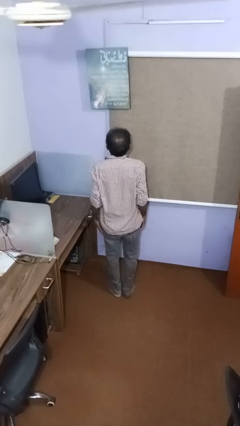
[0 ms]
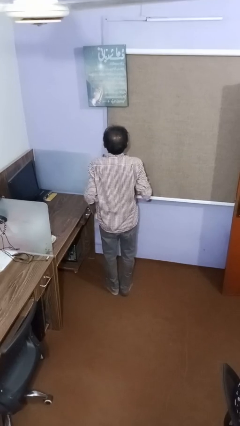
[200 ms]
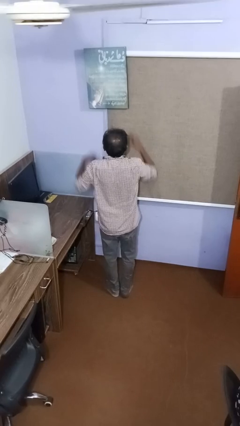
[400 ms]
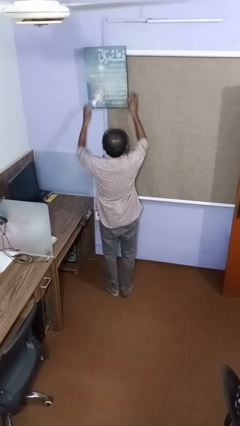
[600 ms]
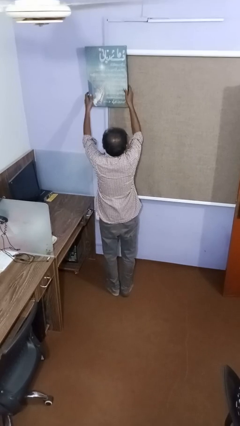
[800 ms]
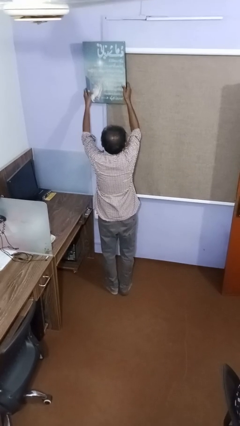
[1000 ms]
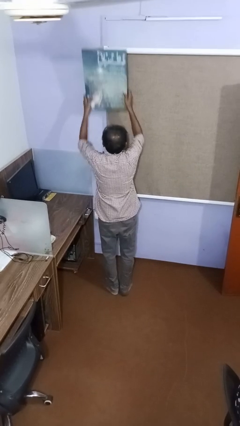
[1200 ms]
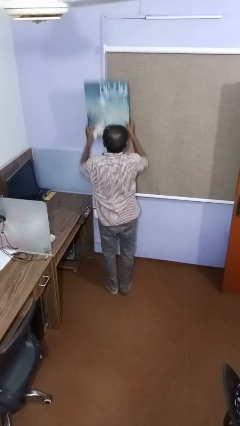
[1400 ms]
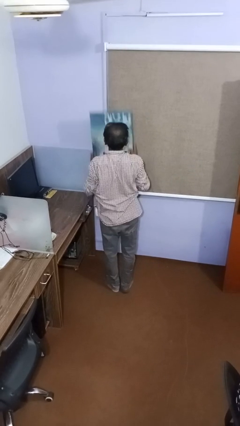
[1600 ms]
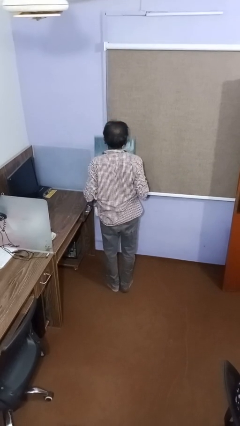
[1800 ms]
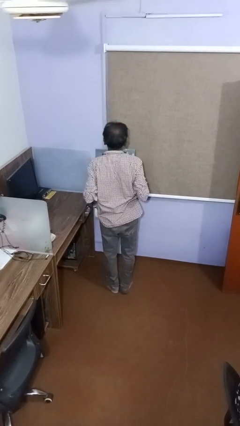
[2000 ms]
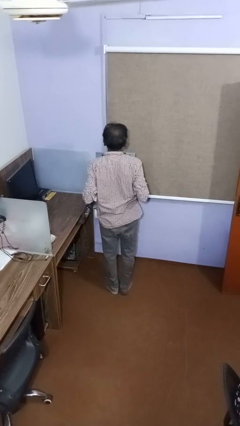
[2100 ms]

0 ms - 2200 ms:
person takes down picture frame

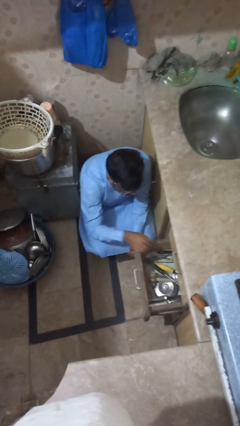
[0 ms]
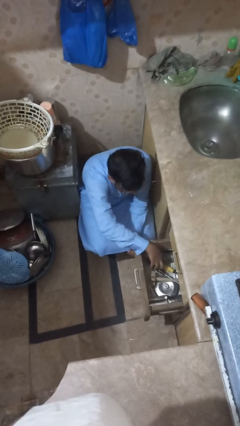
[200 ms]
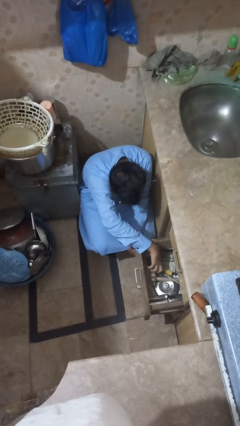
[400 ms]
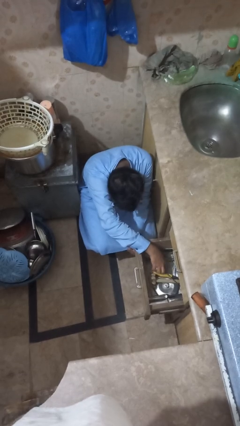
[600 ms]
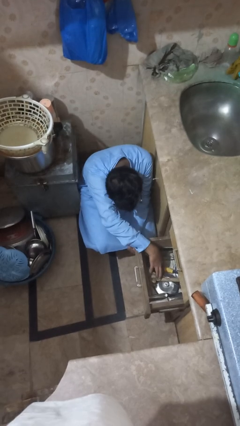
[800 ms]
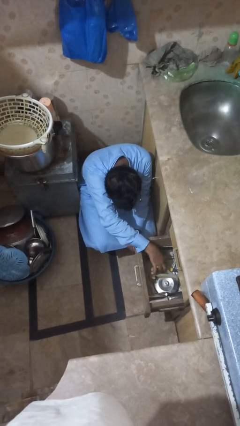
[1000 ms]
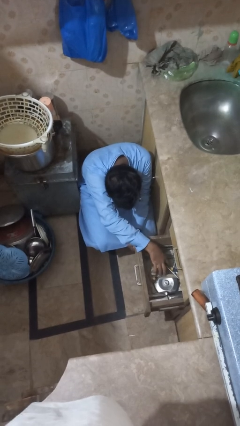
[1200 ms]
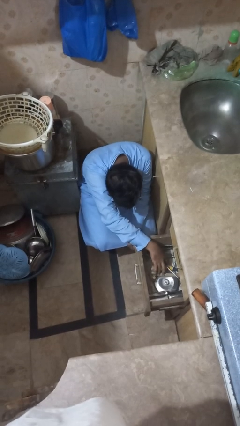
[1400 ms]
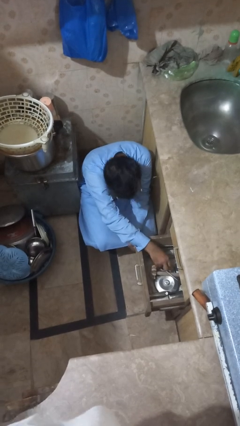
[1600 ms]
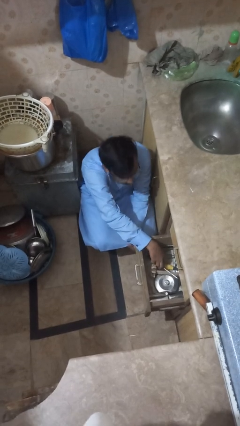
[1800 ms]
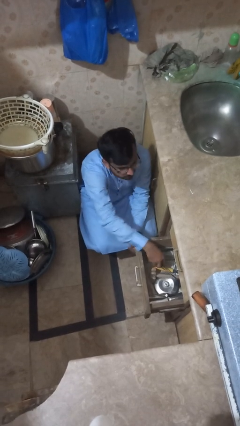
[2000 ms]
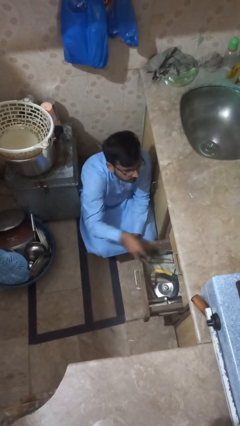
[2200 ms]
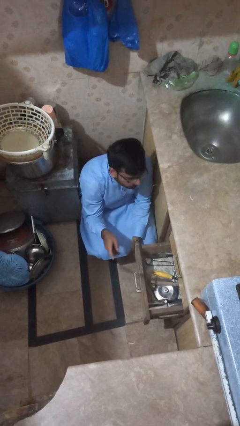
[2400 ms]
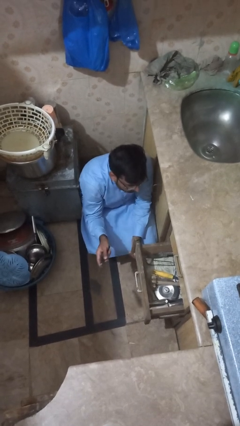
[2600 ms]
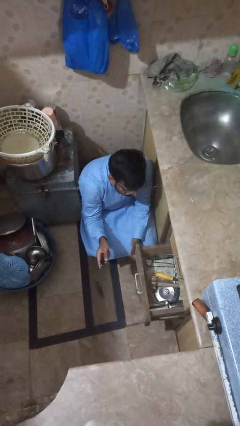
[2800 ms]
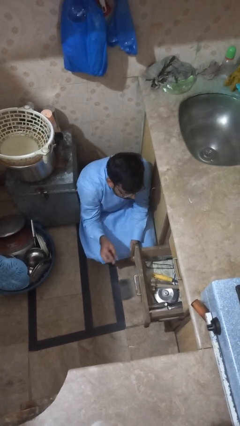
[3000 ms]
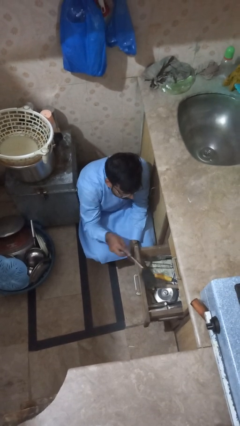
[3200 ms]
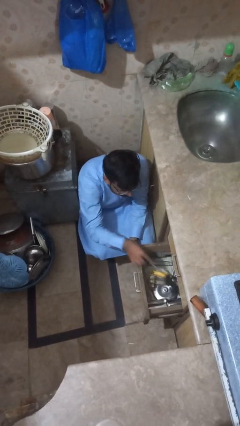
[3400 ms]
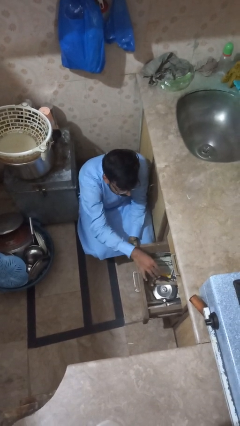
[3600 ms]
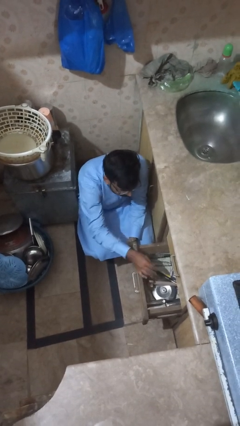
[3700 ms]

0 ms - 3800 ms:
person searches in kitchen drawer

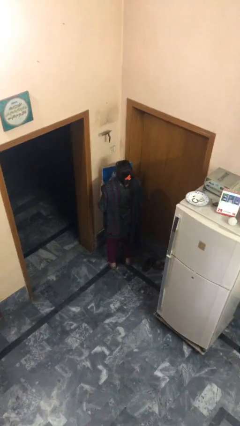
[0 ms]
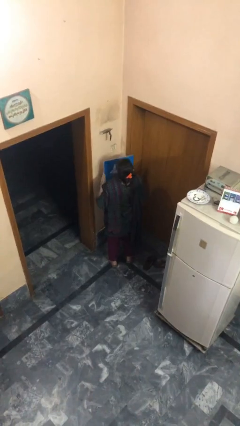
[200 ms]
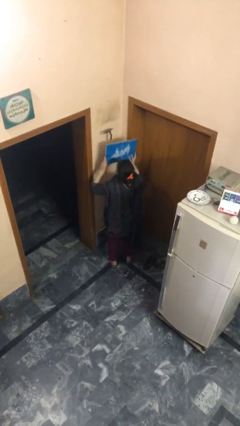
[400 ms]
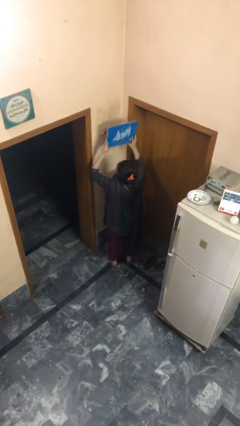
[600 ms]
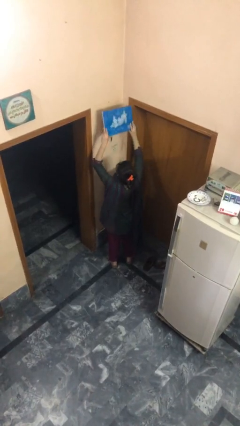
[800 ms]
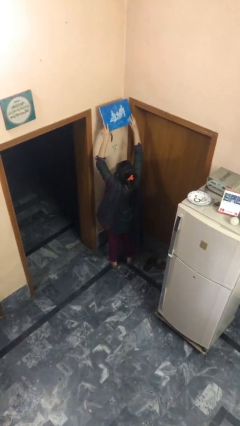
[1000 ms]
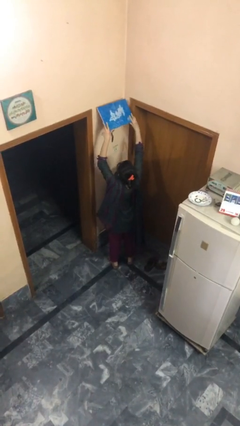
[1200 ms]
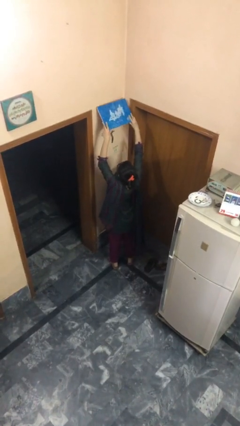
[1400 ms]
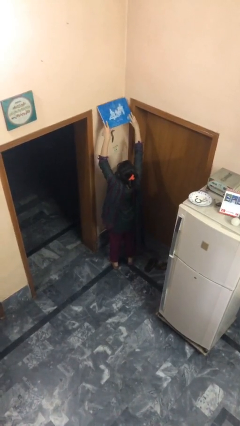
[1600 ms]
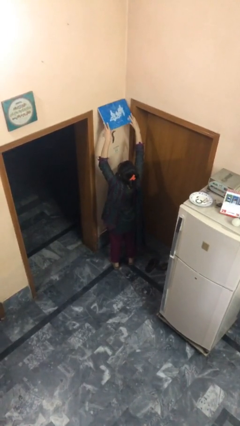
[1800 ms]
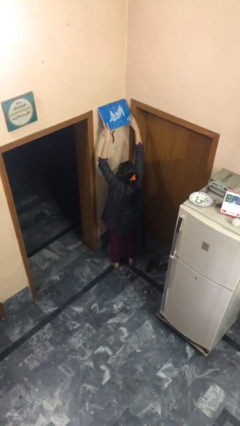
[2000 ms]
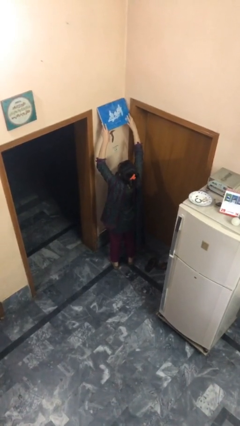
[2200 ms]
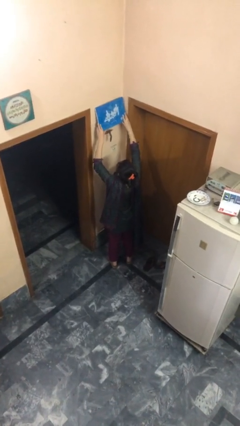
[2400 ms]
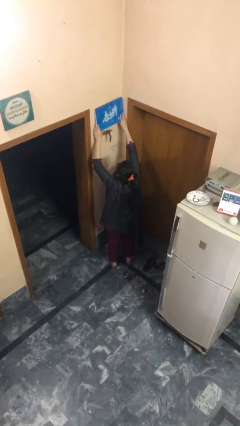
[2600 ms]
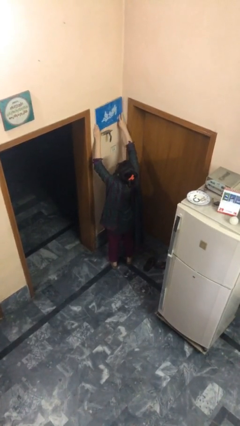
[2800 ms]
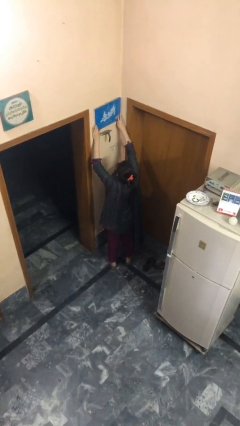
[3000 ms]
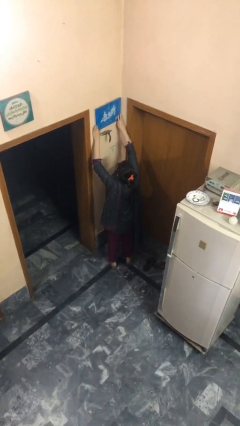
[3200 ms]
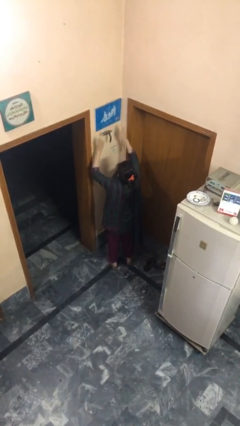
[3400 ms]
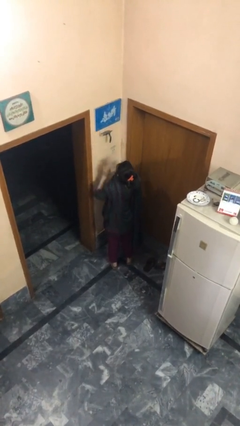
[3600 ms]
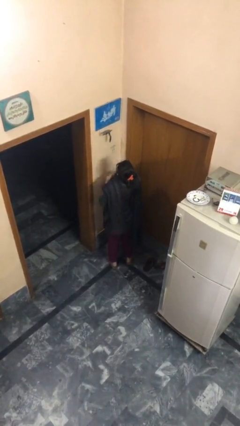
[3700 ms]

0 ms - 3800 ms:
person puts up picture frame

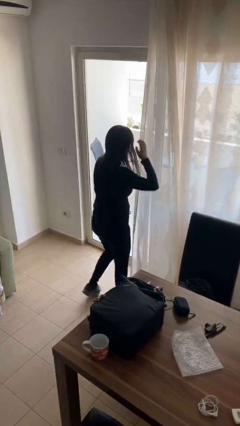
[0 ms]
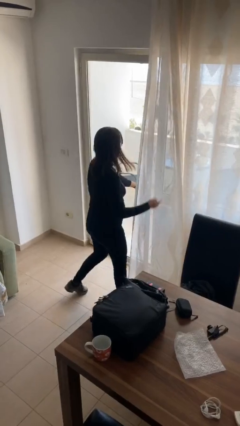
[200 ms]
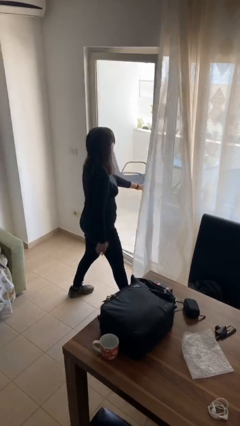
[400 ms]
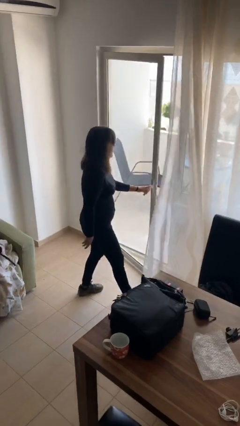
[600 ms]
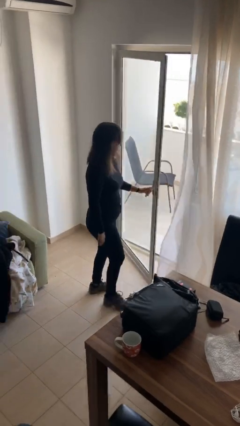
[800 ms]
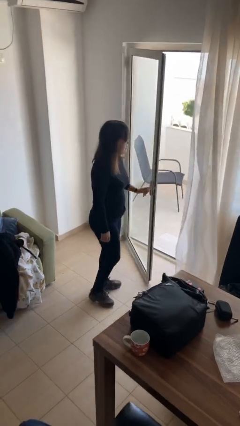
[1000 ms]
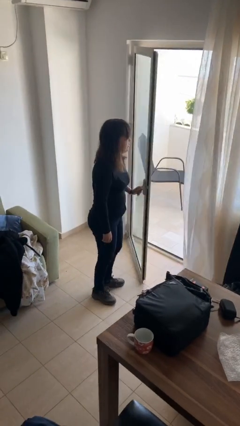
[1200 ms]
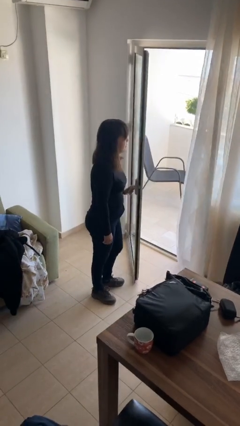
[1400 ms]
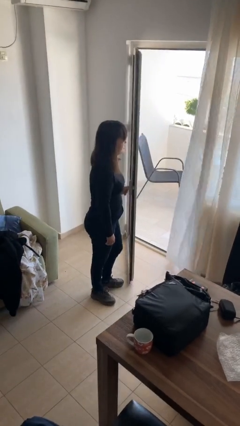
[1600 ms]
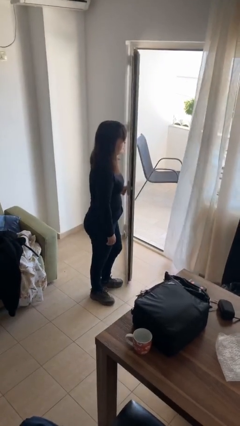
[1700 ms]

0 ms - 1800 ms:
person opens facility door

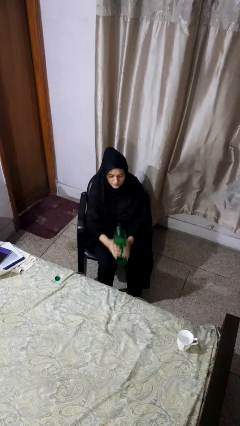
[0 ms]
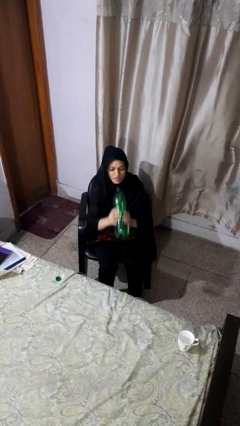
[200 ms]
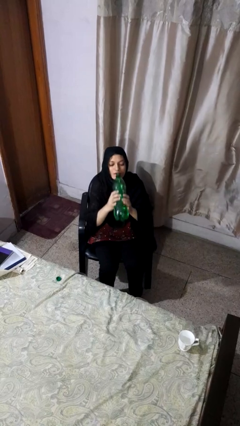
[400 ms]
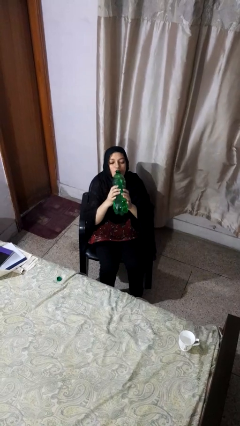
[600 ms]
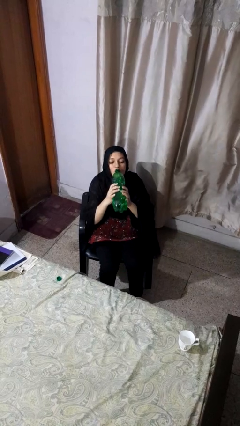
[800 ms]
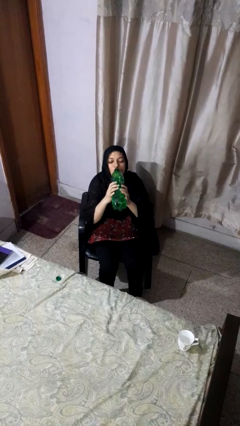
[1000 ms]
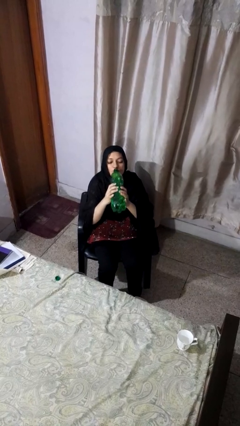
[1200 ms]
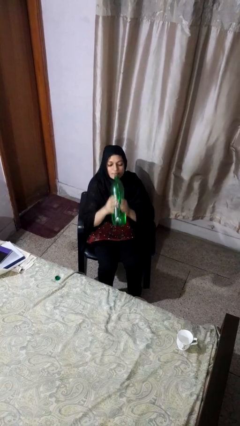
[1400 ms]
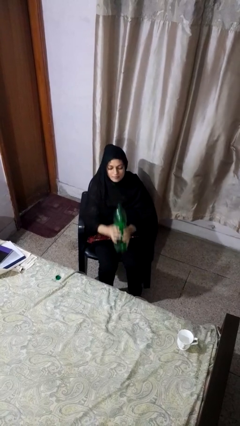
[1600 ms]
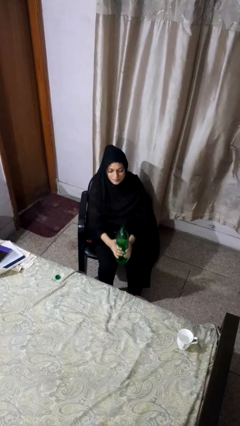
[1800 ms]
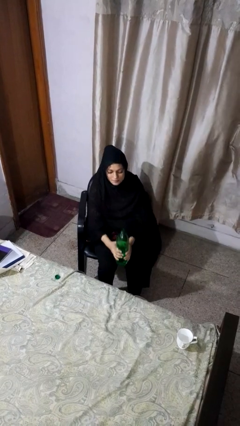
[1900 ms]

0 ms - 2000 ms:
person drinks from bottle

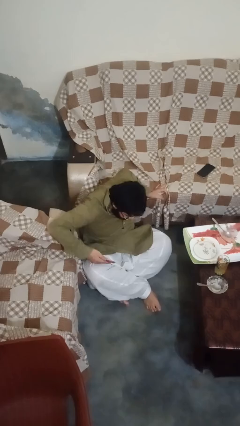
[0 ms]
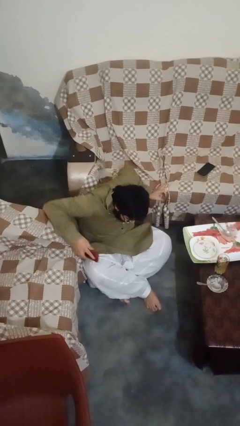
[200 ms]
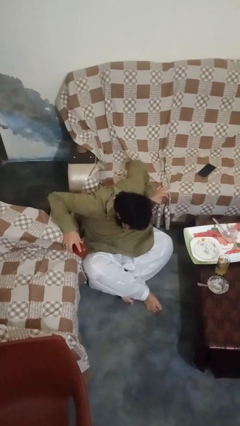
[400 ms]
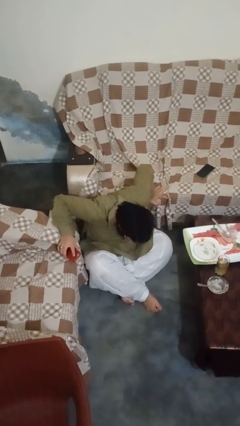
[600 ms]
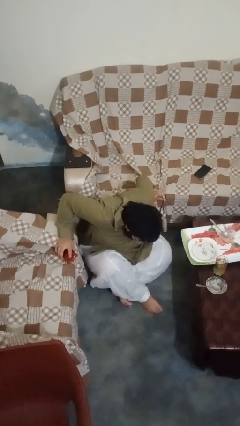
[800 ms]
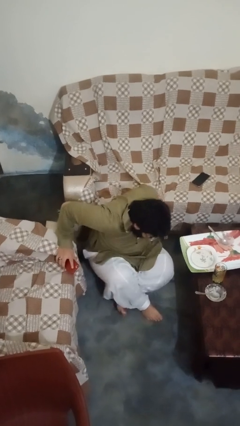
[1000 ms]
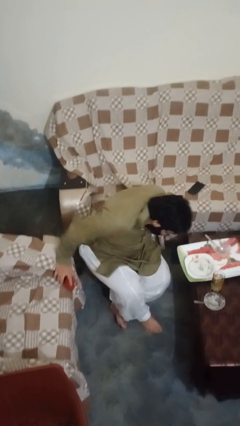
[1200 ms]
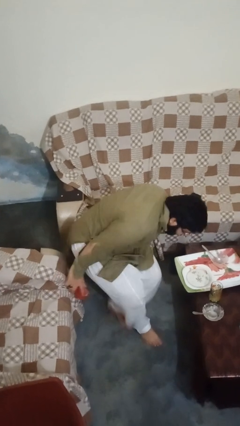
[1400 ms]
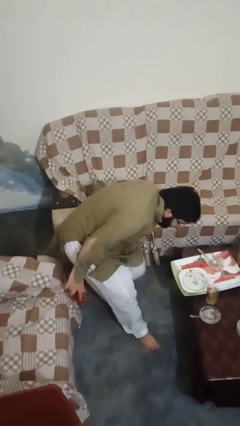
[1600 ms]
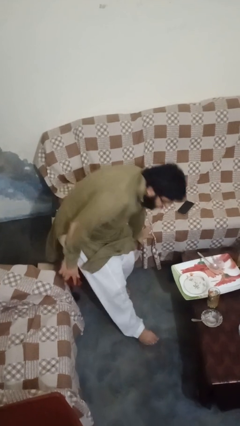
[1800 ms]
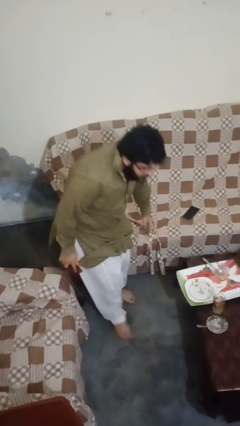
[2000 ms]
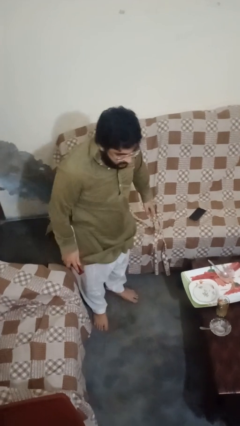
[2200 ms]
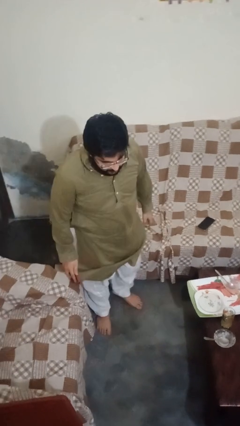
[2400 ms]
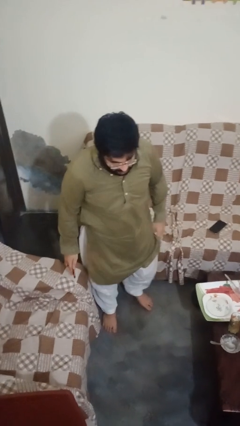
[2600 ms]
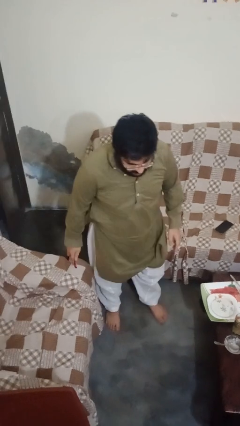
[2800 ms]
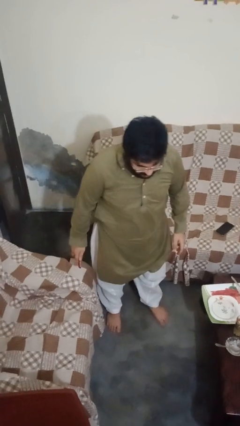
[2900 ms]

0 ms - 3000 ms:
person stands up from floor

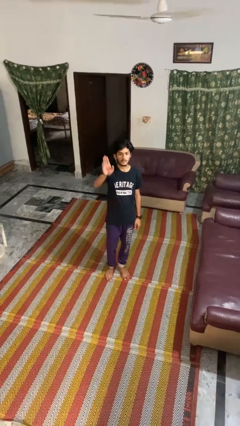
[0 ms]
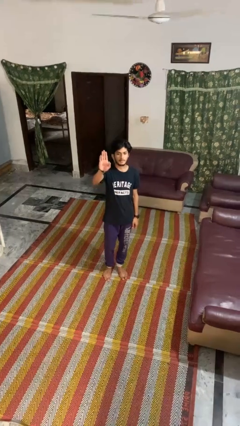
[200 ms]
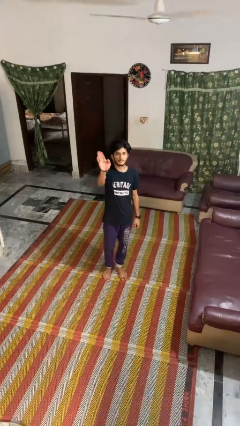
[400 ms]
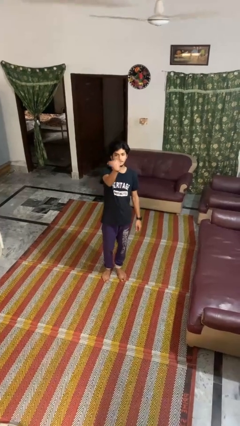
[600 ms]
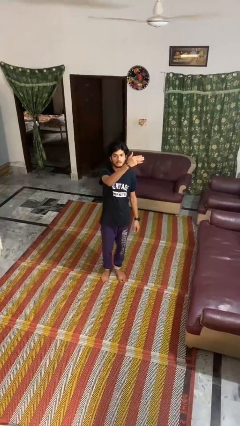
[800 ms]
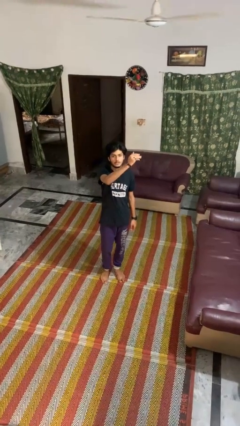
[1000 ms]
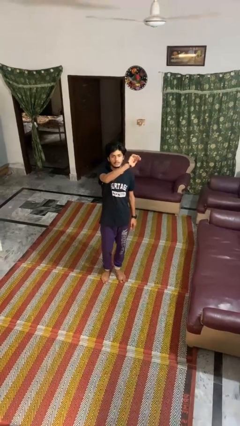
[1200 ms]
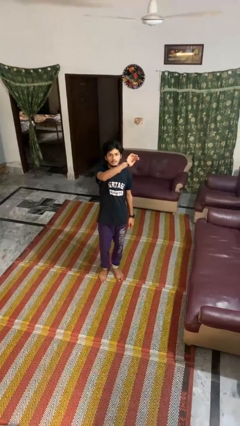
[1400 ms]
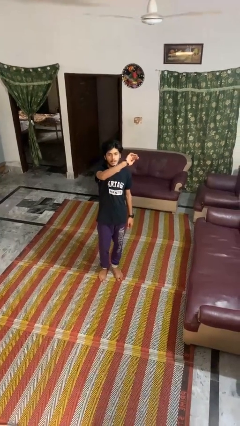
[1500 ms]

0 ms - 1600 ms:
person gestures swipe left
